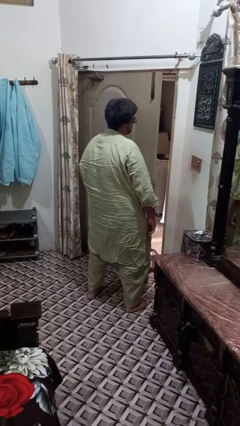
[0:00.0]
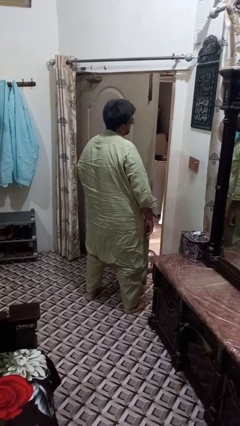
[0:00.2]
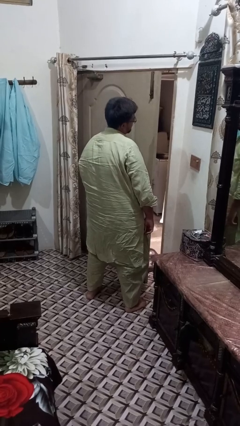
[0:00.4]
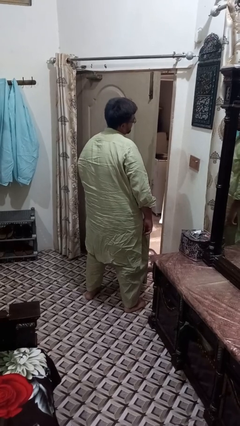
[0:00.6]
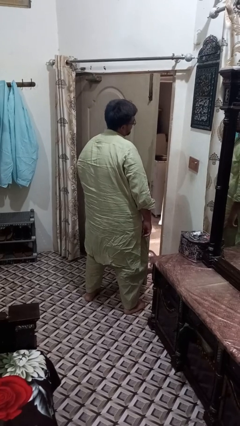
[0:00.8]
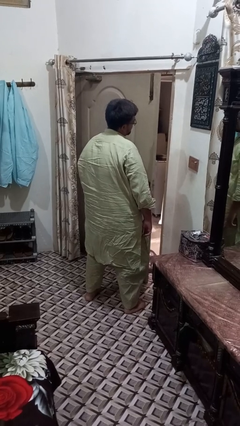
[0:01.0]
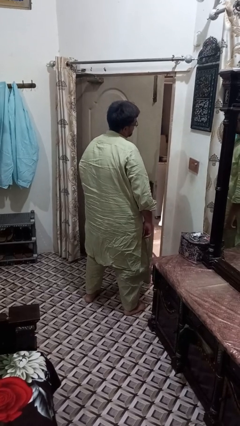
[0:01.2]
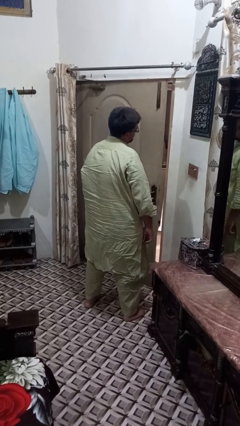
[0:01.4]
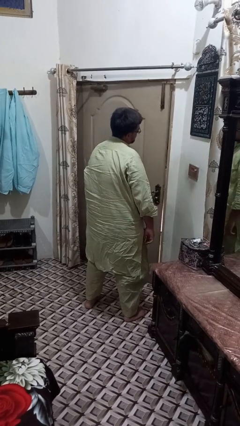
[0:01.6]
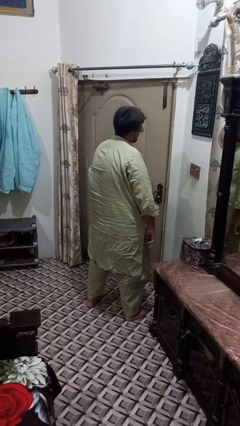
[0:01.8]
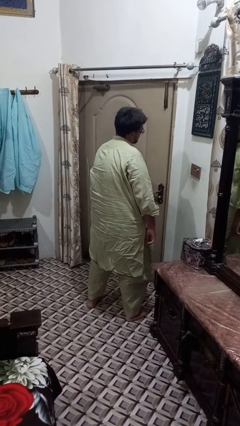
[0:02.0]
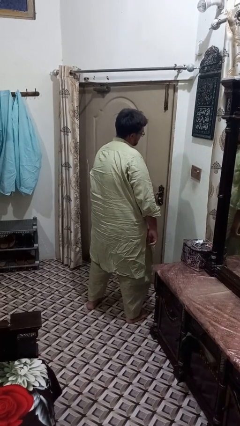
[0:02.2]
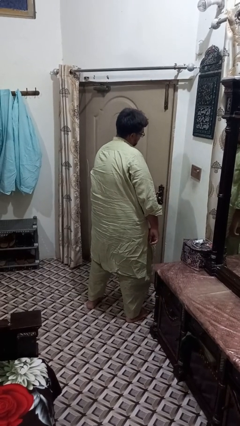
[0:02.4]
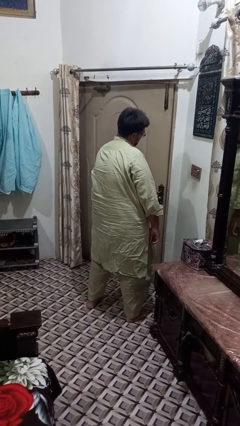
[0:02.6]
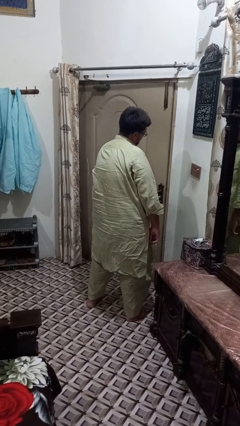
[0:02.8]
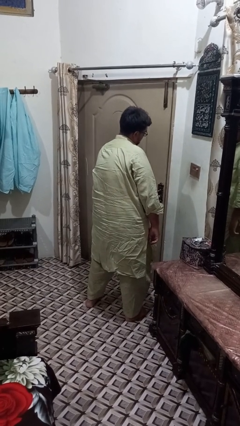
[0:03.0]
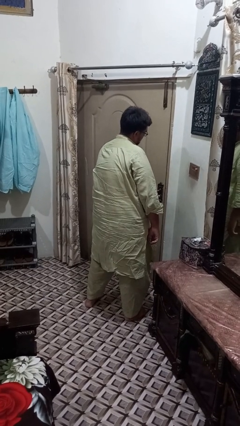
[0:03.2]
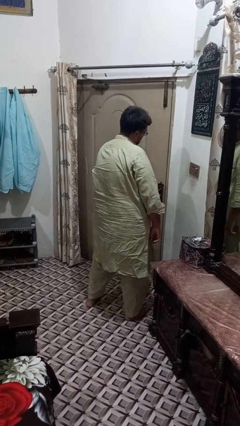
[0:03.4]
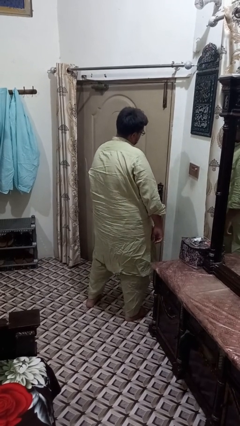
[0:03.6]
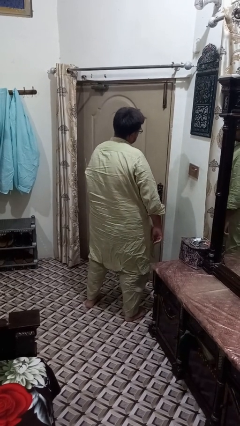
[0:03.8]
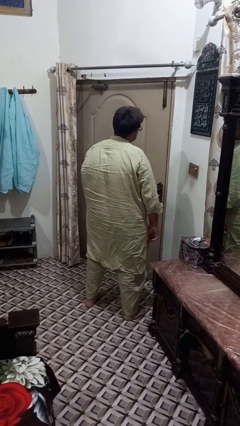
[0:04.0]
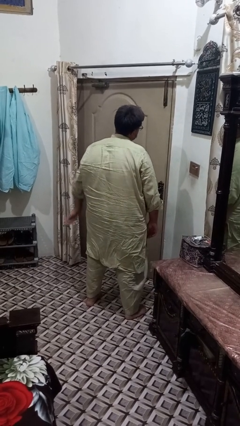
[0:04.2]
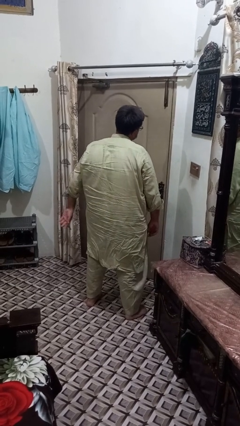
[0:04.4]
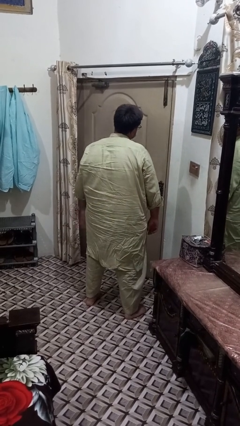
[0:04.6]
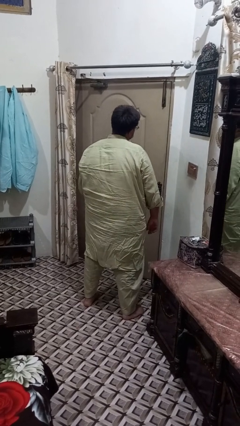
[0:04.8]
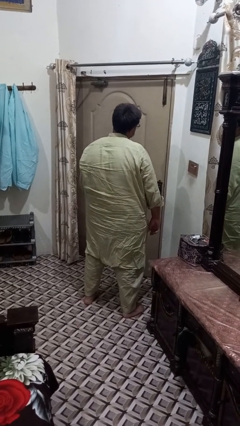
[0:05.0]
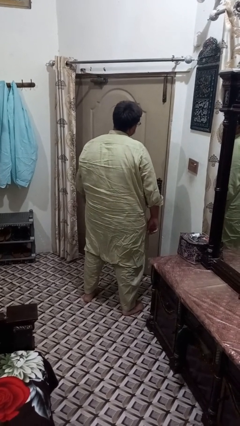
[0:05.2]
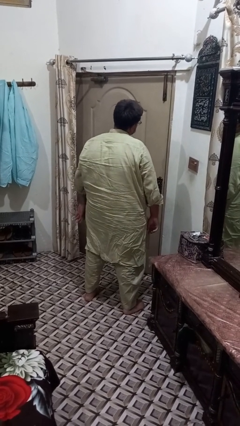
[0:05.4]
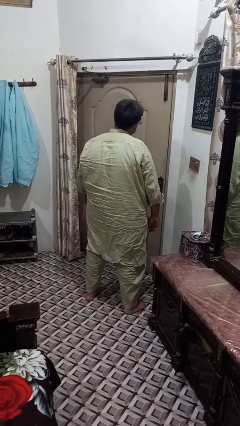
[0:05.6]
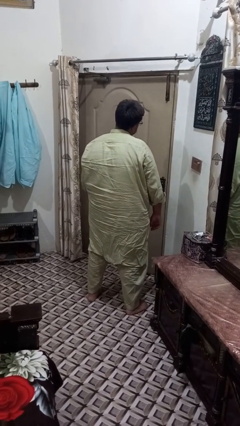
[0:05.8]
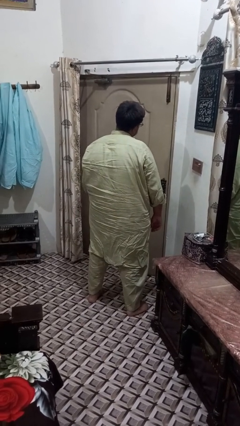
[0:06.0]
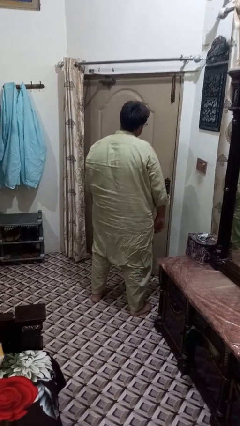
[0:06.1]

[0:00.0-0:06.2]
person closes gate

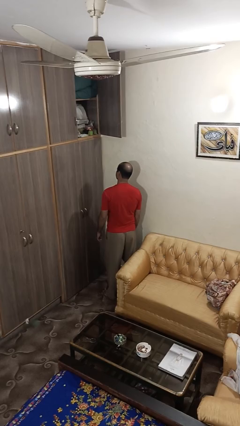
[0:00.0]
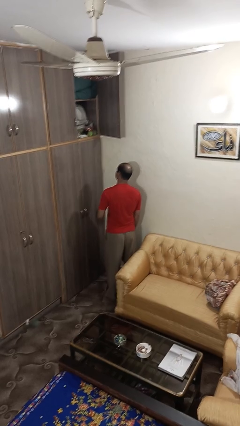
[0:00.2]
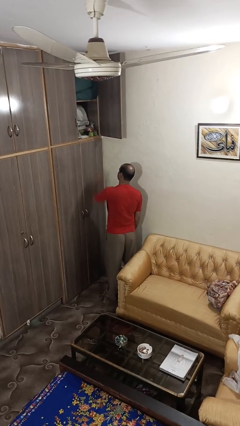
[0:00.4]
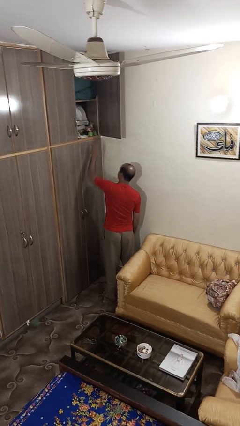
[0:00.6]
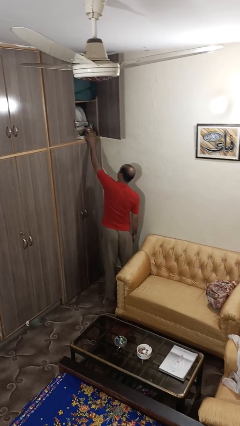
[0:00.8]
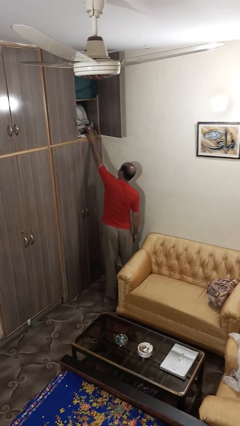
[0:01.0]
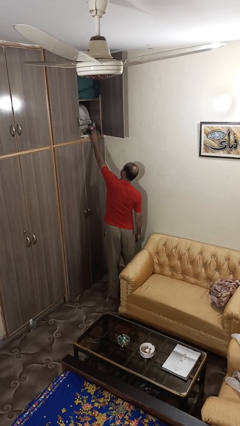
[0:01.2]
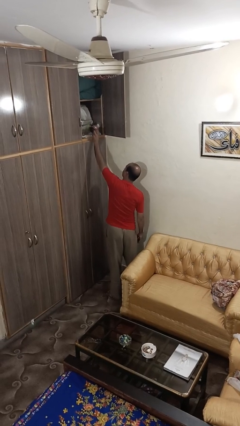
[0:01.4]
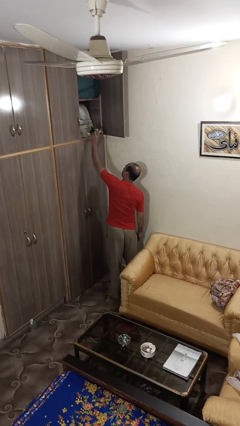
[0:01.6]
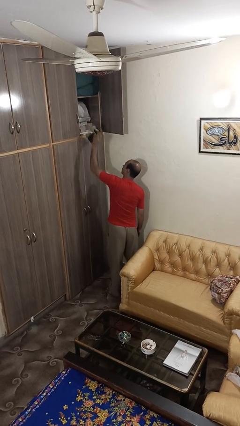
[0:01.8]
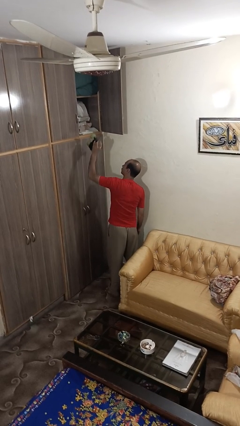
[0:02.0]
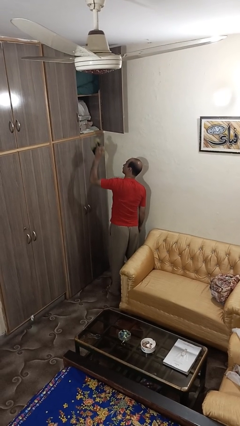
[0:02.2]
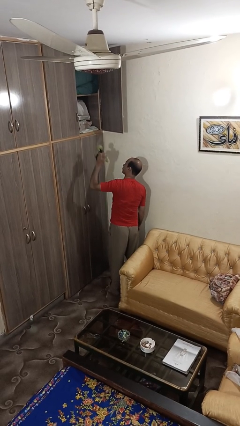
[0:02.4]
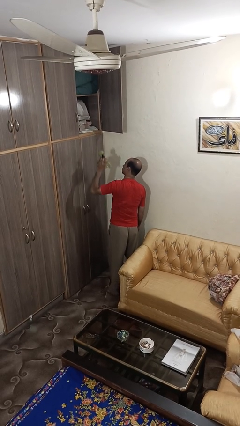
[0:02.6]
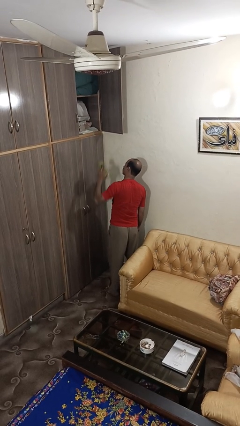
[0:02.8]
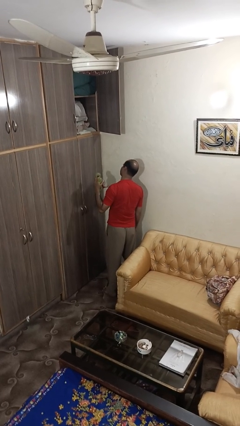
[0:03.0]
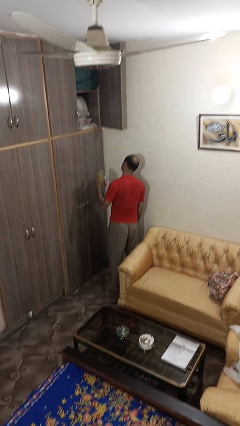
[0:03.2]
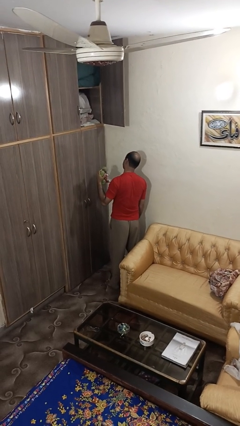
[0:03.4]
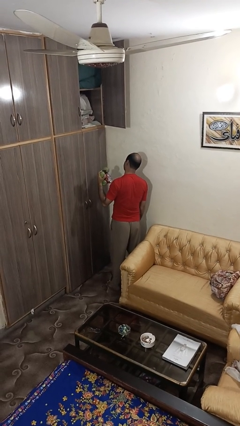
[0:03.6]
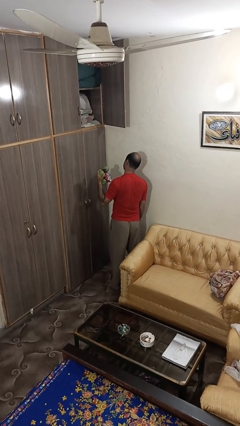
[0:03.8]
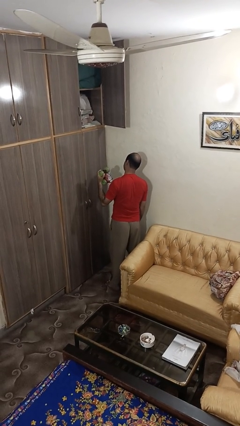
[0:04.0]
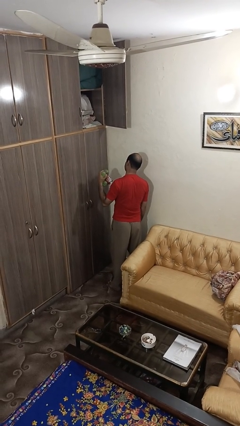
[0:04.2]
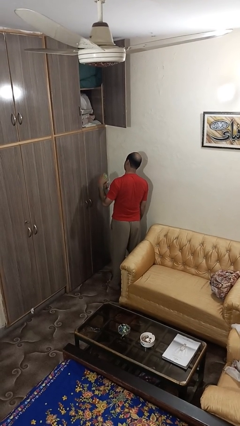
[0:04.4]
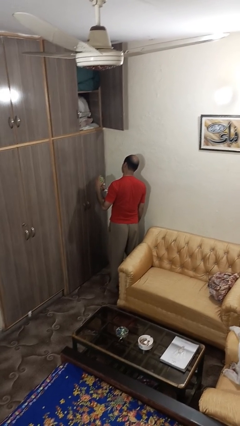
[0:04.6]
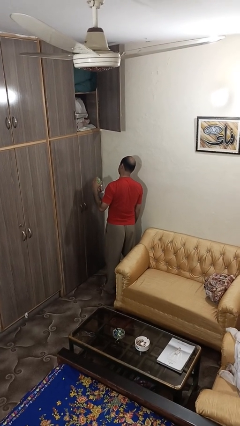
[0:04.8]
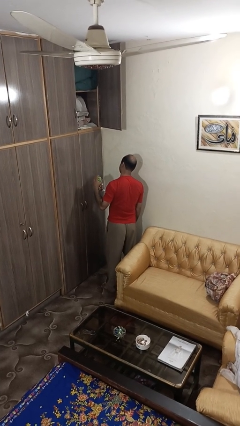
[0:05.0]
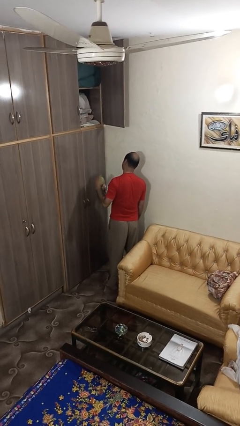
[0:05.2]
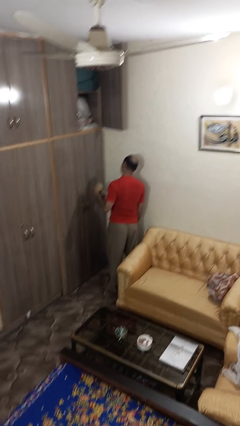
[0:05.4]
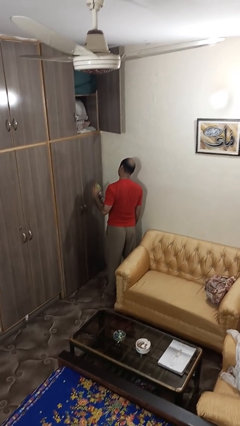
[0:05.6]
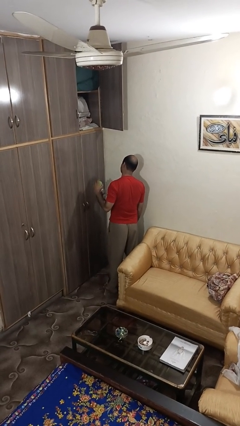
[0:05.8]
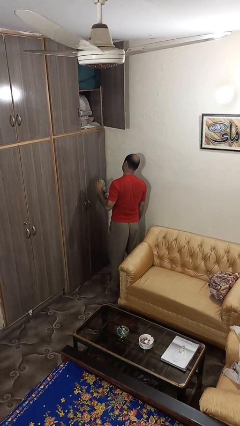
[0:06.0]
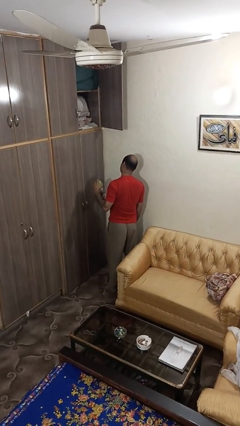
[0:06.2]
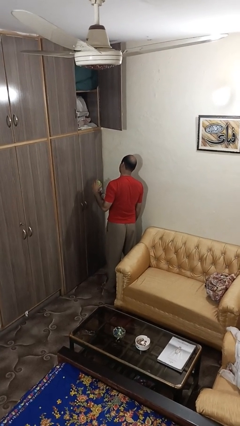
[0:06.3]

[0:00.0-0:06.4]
person picks up object from shelf

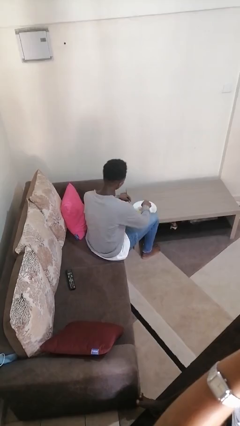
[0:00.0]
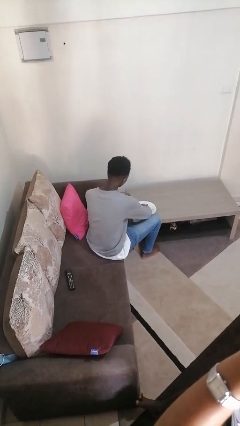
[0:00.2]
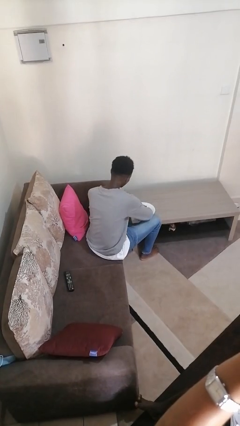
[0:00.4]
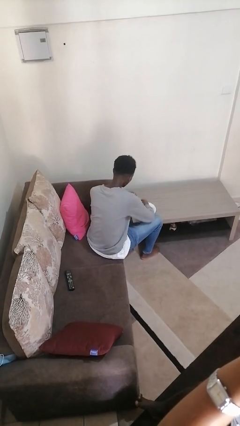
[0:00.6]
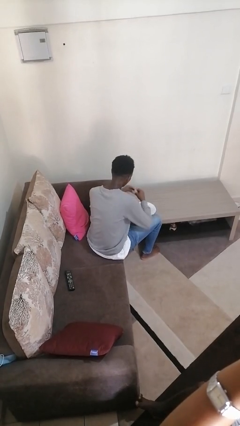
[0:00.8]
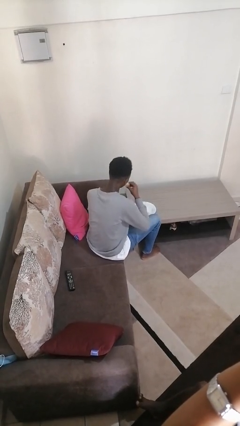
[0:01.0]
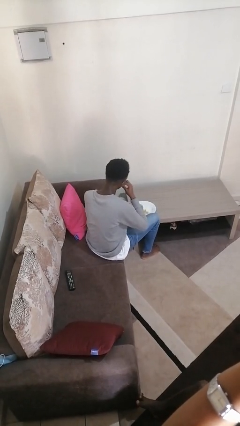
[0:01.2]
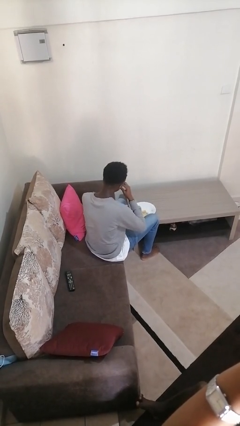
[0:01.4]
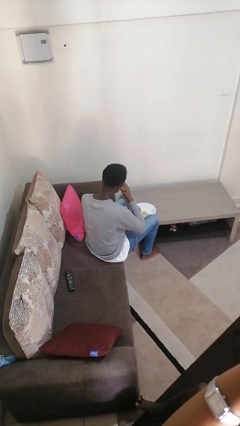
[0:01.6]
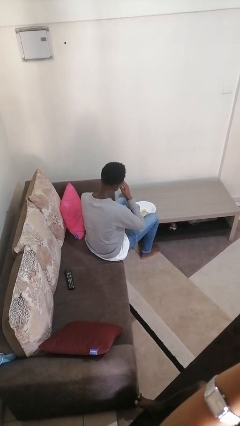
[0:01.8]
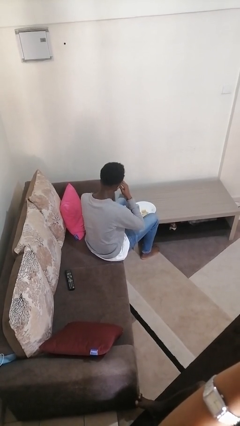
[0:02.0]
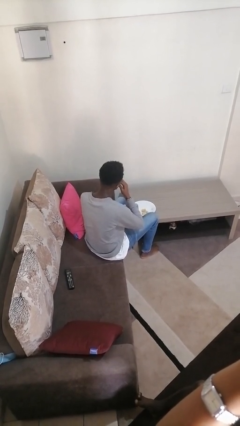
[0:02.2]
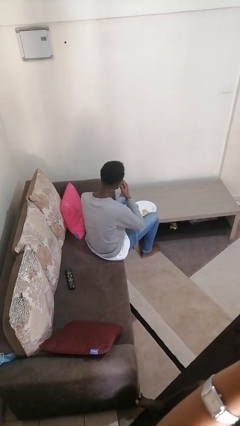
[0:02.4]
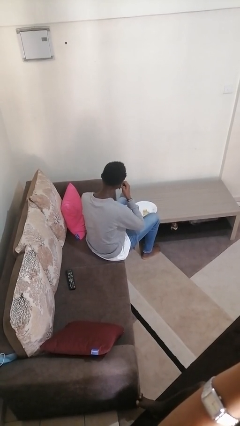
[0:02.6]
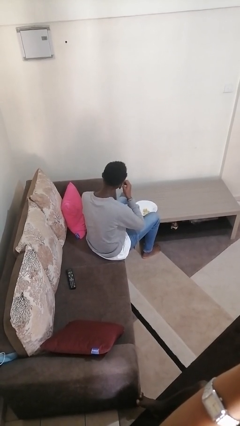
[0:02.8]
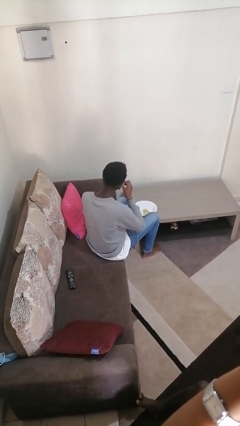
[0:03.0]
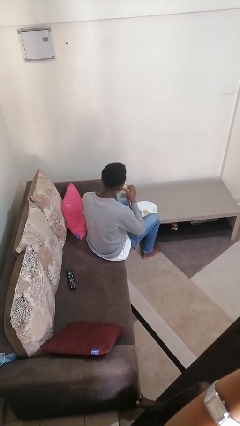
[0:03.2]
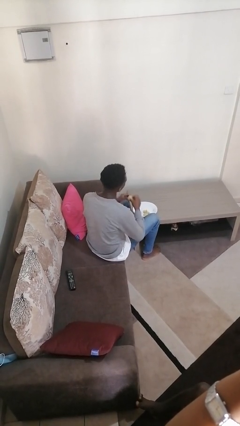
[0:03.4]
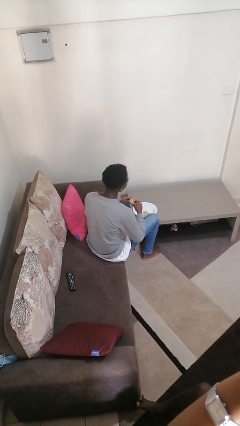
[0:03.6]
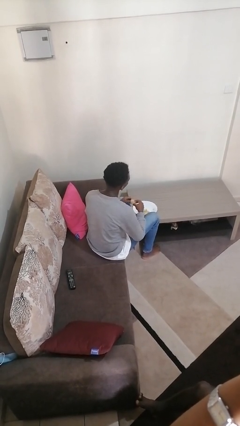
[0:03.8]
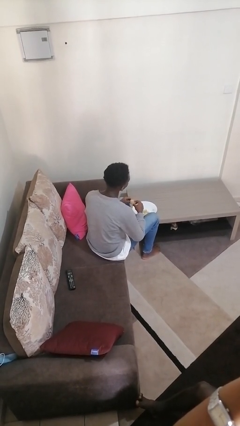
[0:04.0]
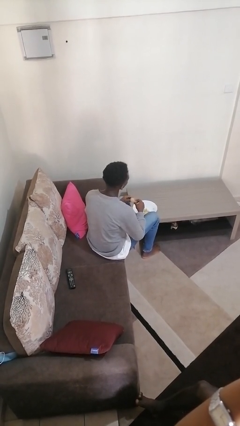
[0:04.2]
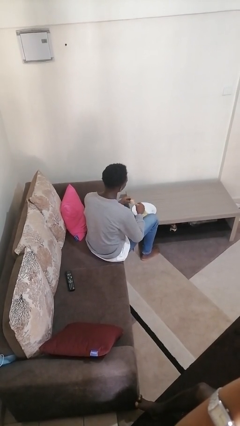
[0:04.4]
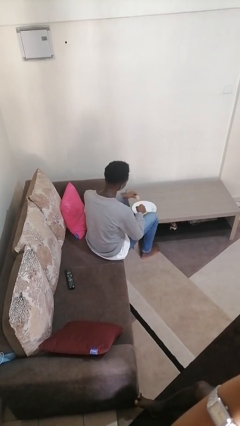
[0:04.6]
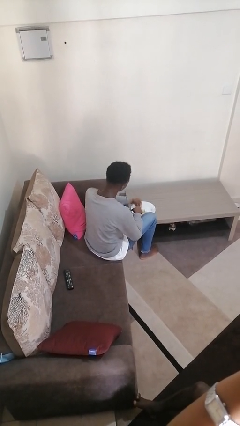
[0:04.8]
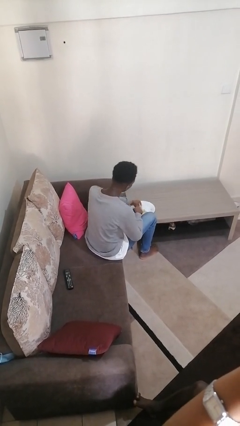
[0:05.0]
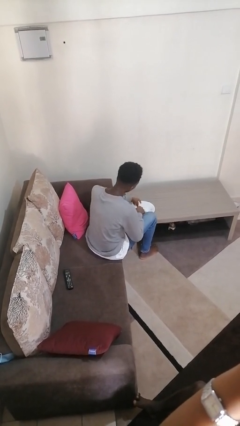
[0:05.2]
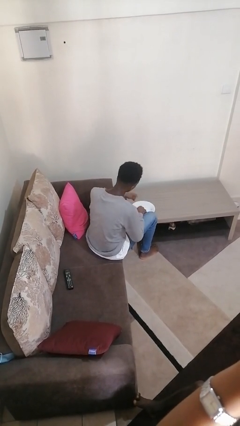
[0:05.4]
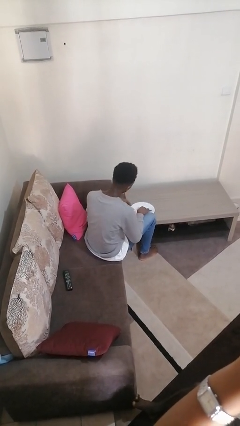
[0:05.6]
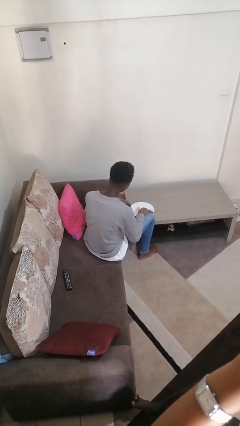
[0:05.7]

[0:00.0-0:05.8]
person eats with hands
